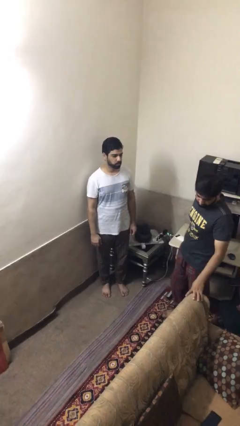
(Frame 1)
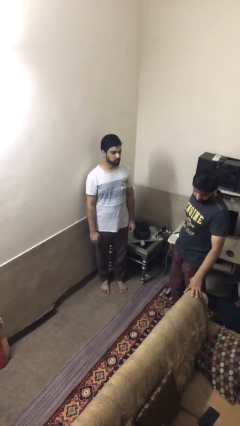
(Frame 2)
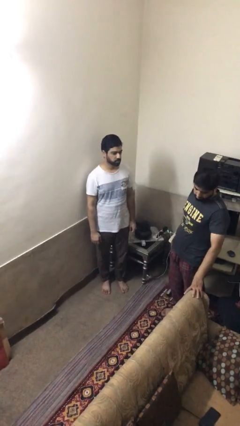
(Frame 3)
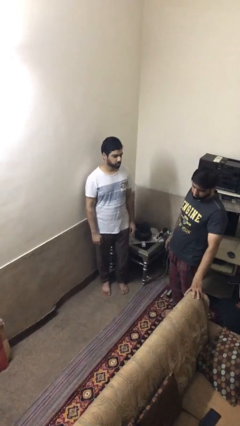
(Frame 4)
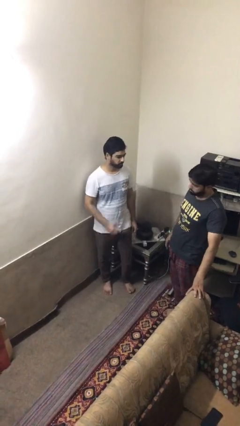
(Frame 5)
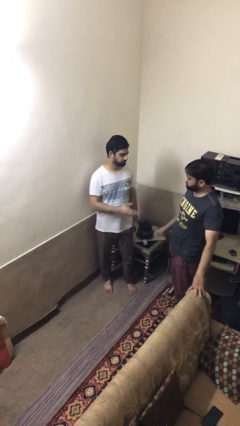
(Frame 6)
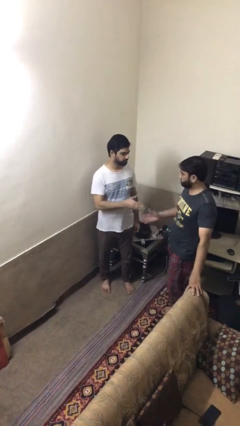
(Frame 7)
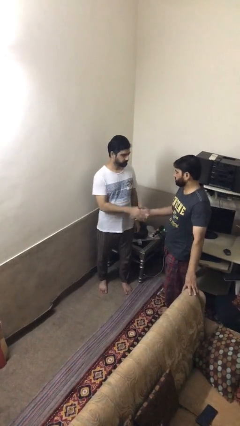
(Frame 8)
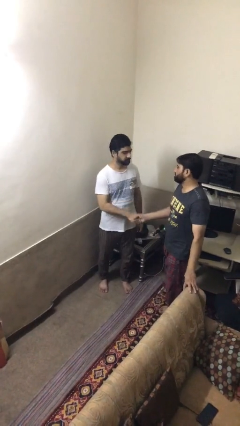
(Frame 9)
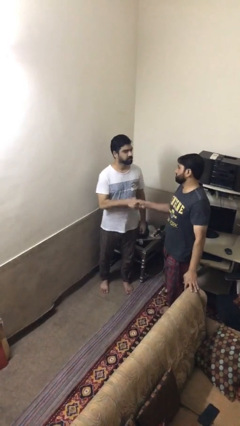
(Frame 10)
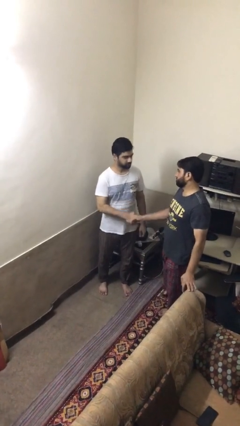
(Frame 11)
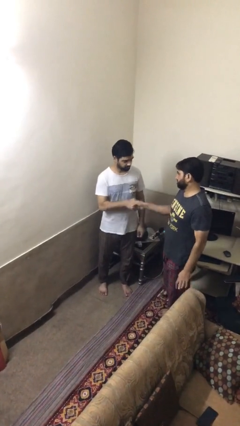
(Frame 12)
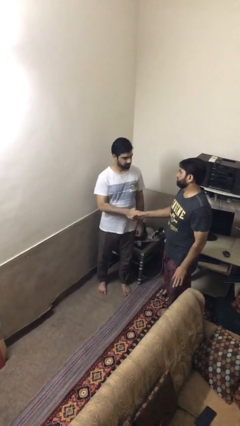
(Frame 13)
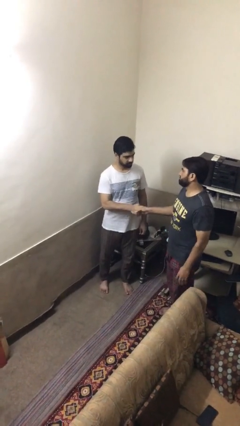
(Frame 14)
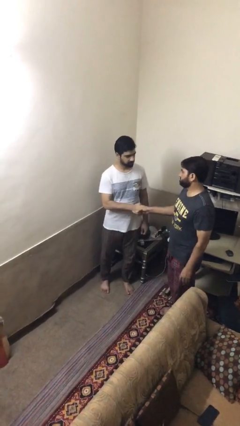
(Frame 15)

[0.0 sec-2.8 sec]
person shakes hand

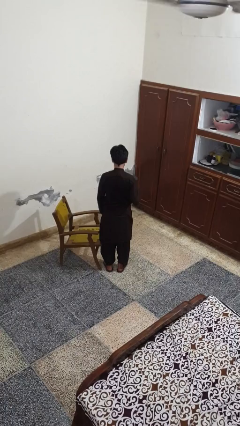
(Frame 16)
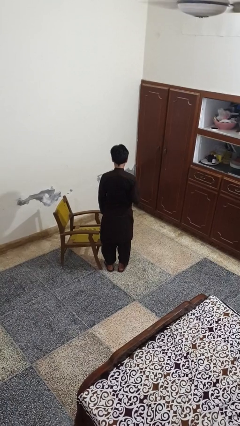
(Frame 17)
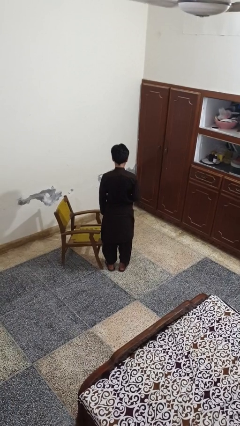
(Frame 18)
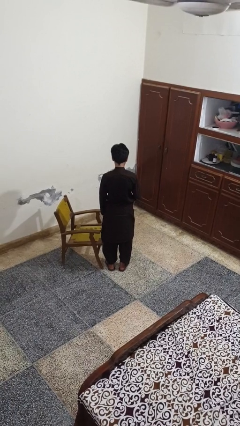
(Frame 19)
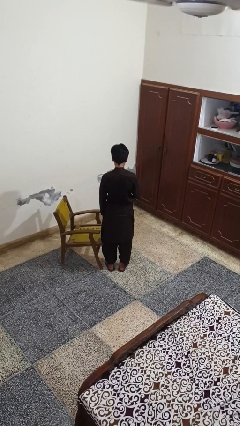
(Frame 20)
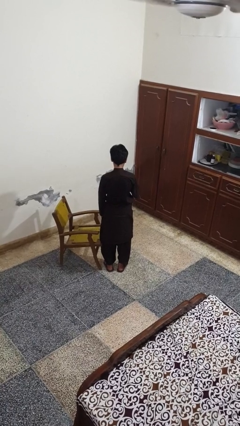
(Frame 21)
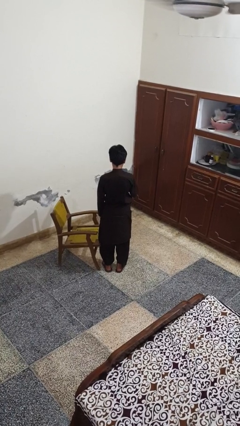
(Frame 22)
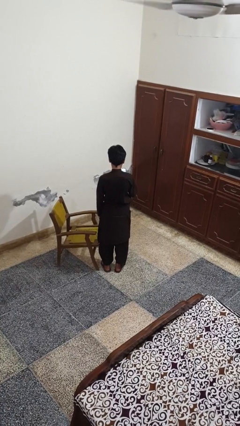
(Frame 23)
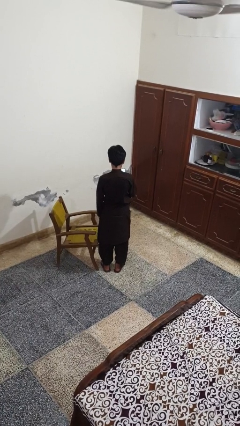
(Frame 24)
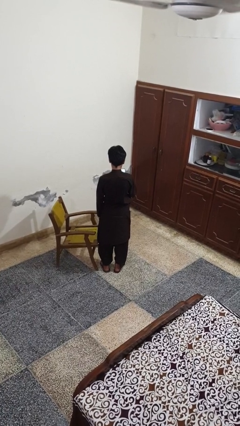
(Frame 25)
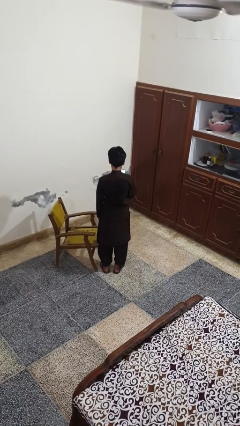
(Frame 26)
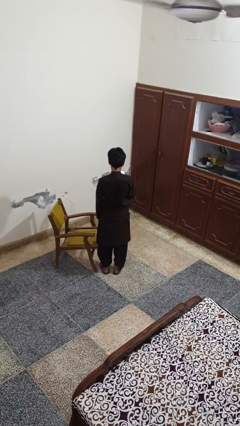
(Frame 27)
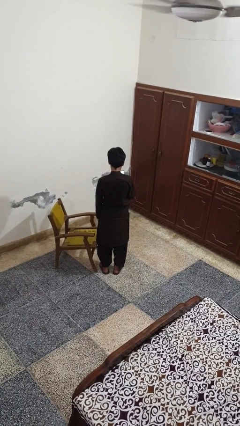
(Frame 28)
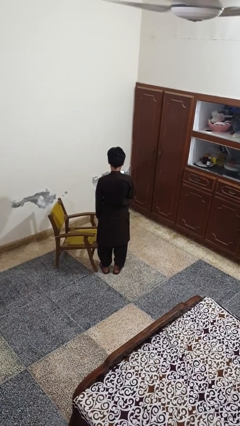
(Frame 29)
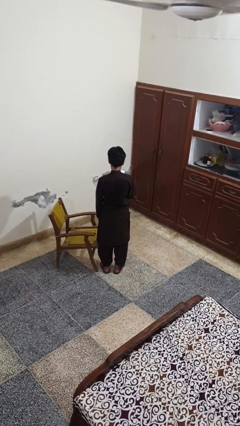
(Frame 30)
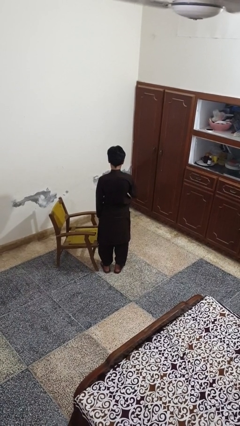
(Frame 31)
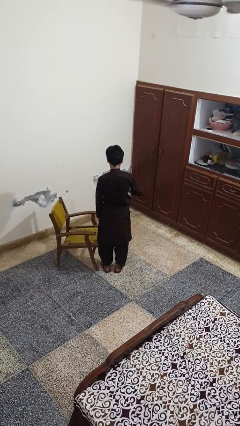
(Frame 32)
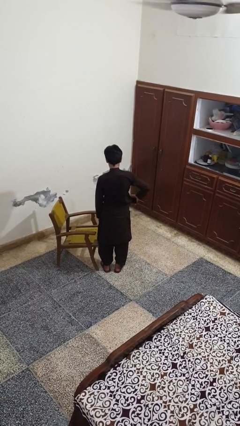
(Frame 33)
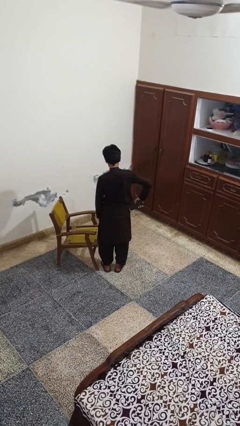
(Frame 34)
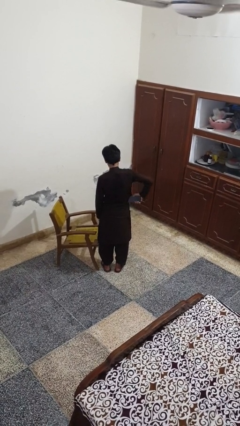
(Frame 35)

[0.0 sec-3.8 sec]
person takes phone from pocket

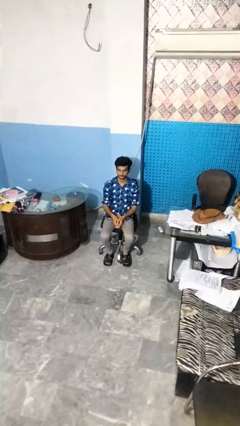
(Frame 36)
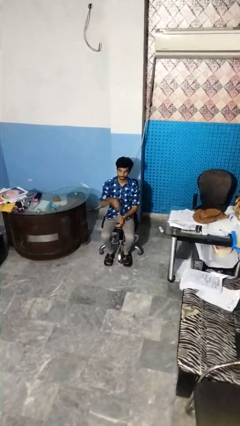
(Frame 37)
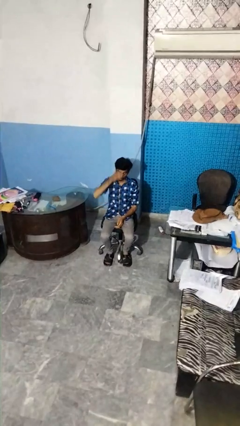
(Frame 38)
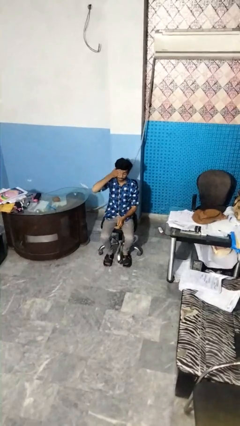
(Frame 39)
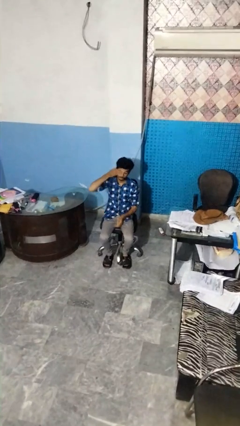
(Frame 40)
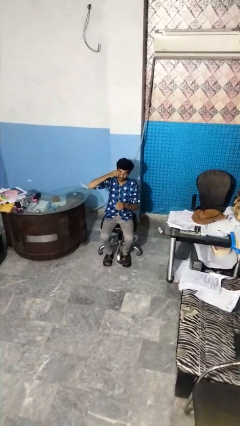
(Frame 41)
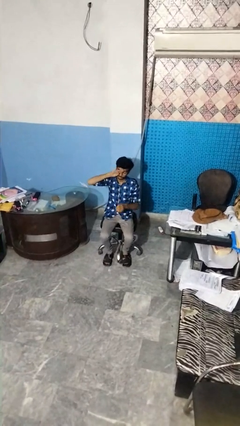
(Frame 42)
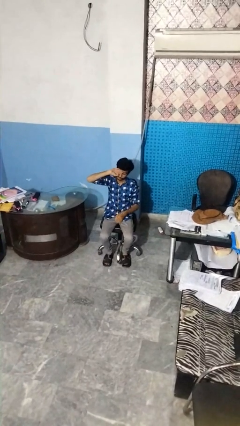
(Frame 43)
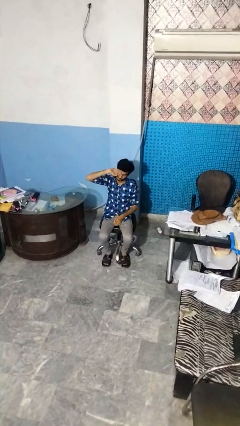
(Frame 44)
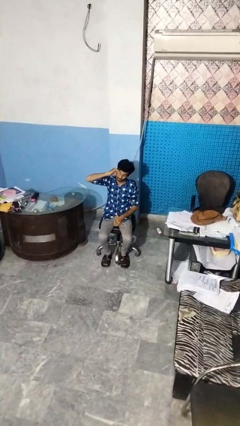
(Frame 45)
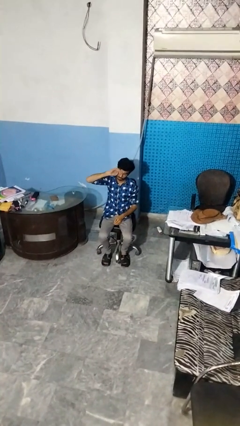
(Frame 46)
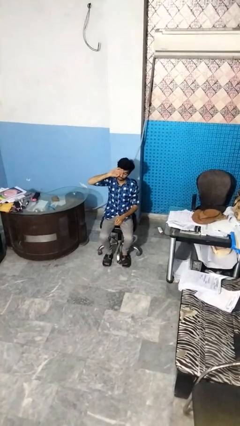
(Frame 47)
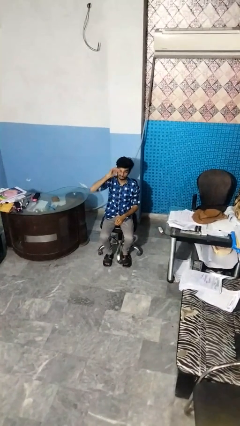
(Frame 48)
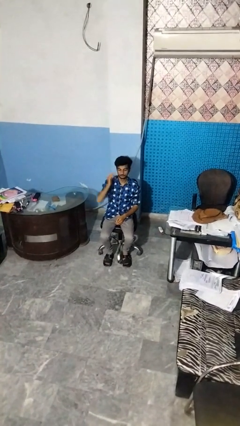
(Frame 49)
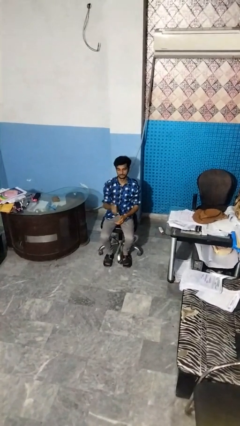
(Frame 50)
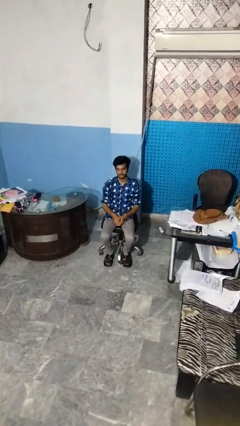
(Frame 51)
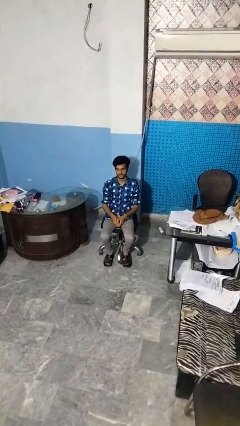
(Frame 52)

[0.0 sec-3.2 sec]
person rubs eyes

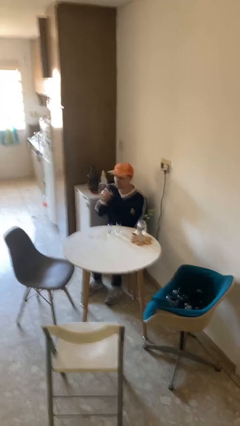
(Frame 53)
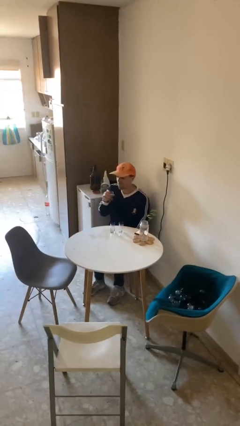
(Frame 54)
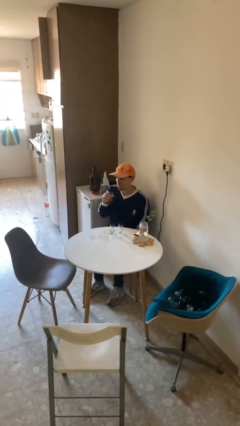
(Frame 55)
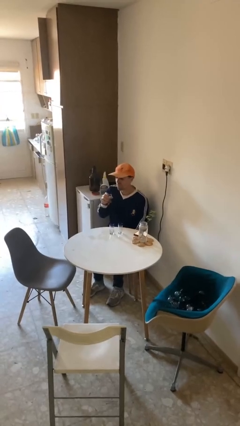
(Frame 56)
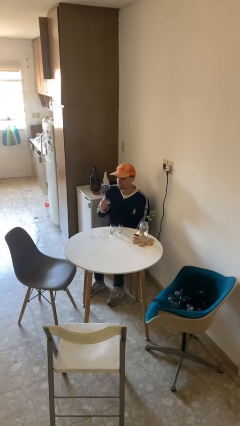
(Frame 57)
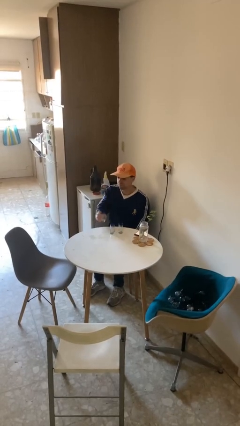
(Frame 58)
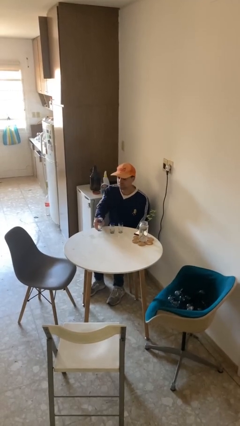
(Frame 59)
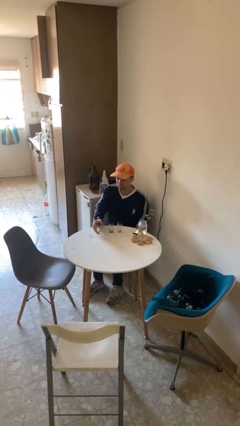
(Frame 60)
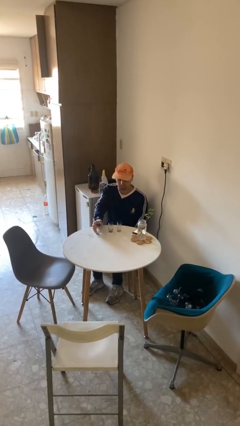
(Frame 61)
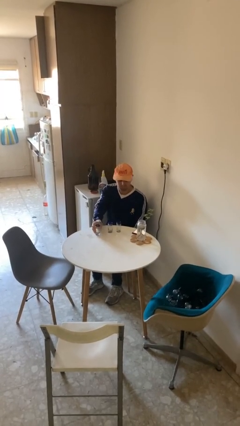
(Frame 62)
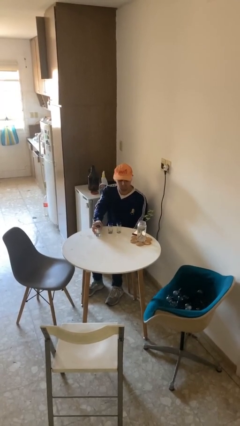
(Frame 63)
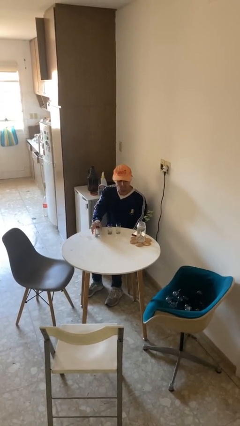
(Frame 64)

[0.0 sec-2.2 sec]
person puts down object on table

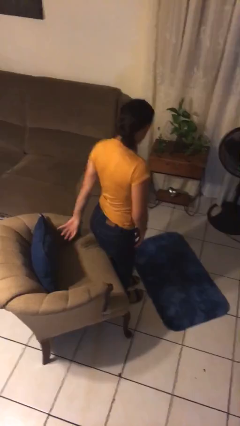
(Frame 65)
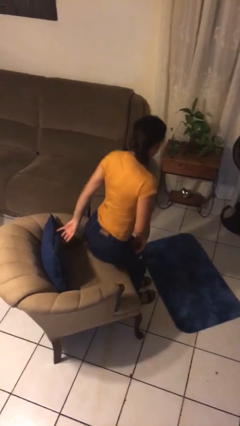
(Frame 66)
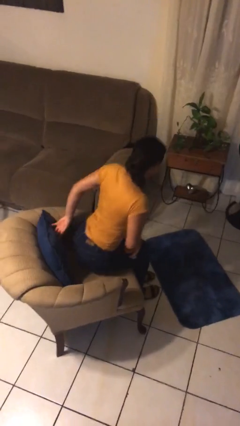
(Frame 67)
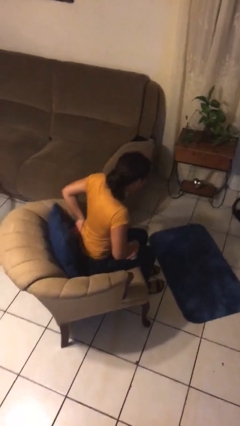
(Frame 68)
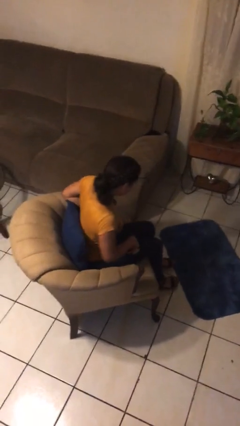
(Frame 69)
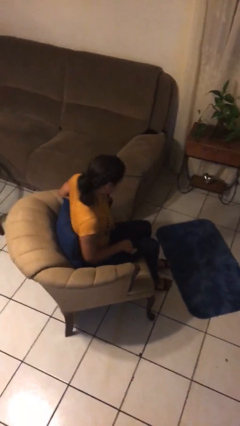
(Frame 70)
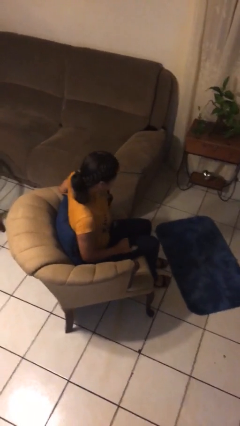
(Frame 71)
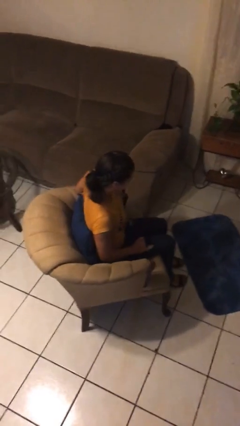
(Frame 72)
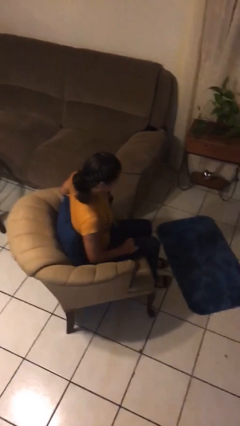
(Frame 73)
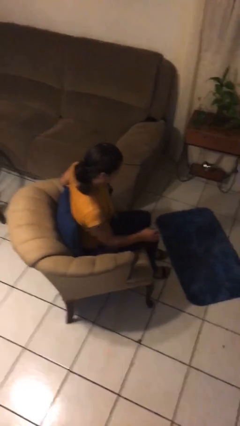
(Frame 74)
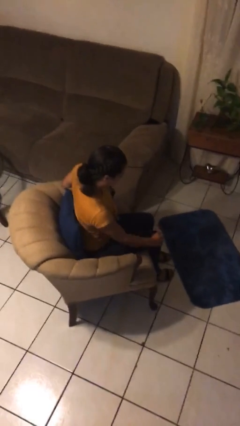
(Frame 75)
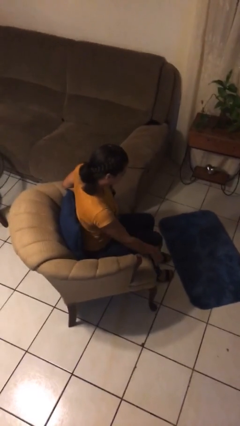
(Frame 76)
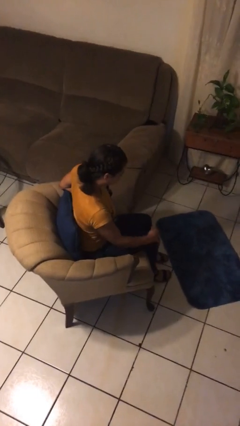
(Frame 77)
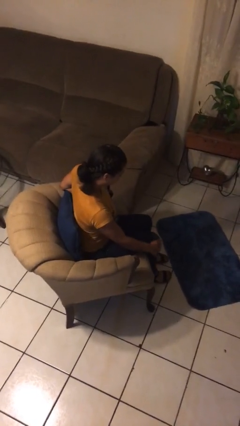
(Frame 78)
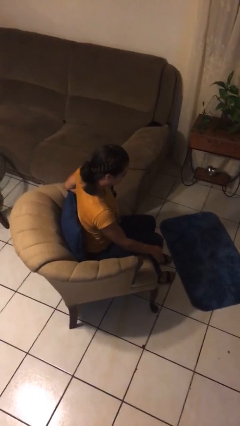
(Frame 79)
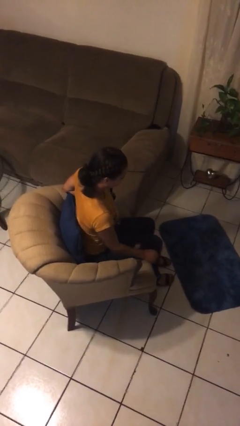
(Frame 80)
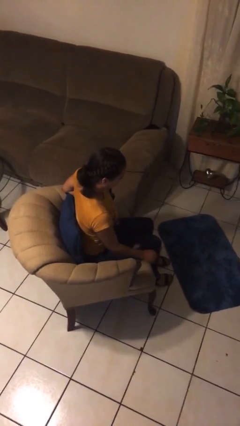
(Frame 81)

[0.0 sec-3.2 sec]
person sits down

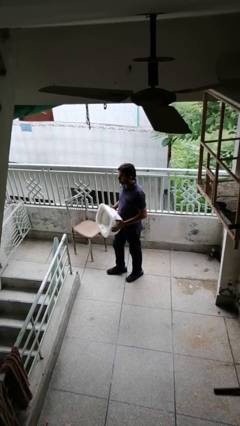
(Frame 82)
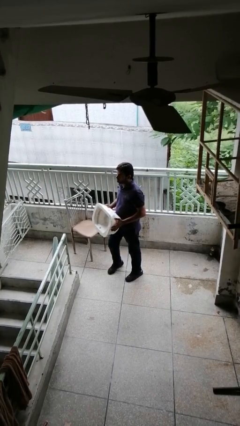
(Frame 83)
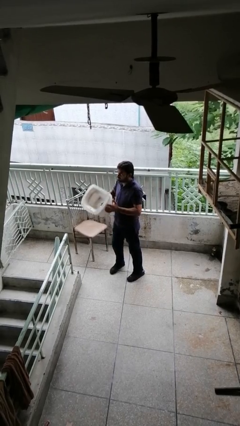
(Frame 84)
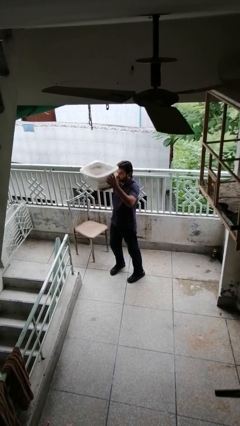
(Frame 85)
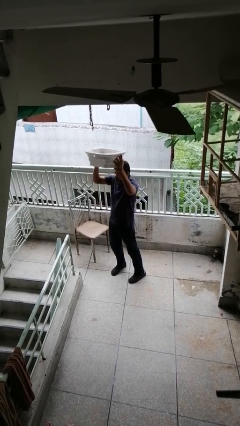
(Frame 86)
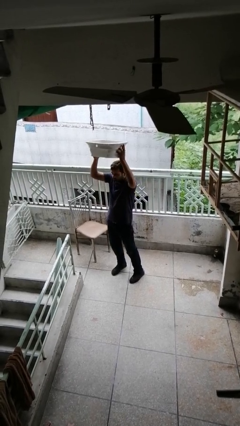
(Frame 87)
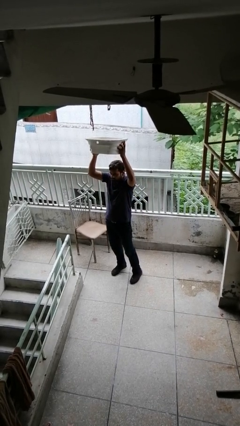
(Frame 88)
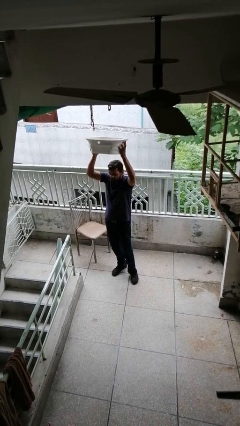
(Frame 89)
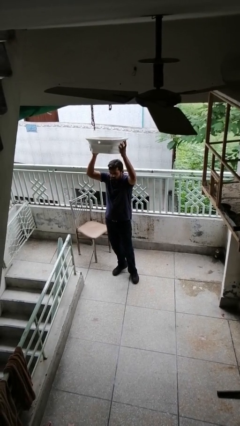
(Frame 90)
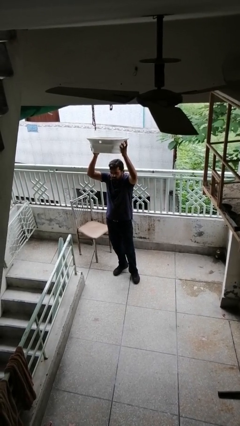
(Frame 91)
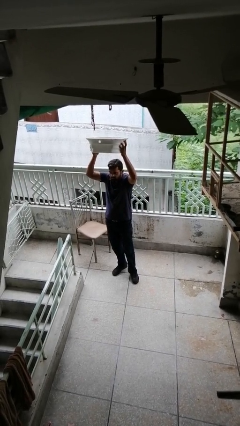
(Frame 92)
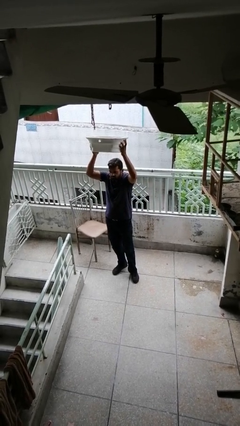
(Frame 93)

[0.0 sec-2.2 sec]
person holds object above head
